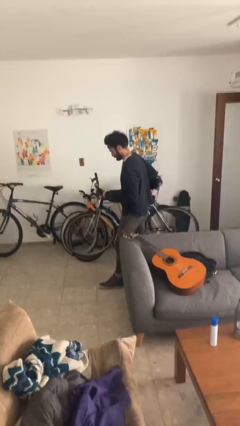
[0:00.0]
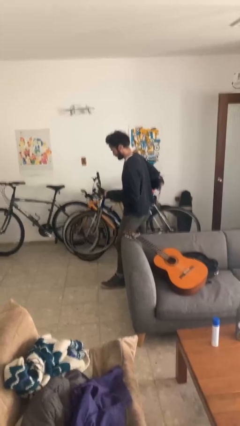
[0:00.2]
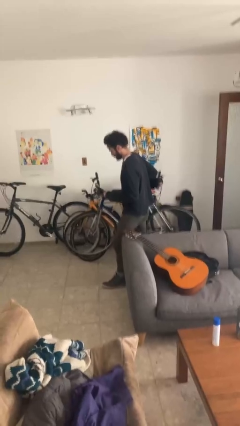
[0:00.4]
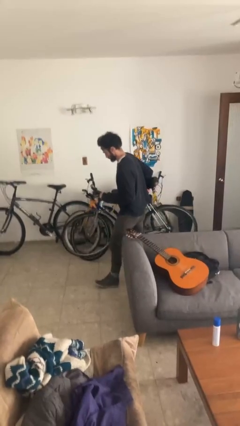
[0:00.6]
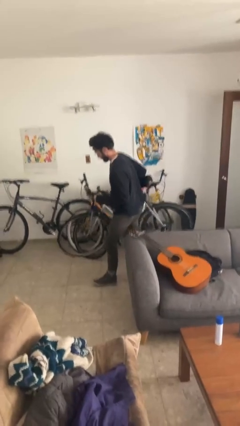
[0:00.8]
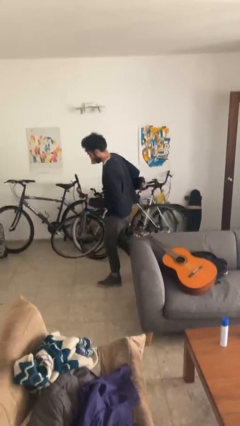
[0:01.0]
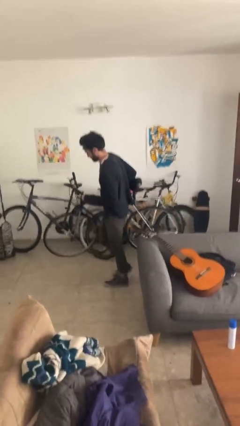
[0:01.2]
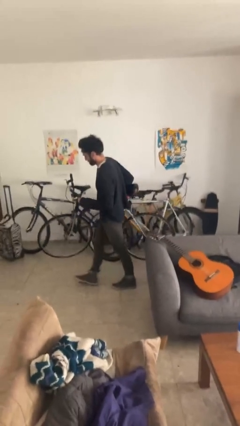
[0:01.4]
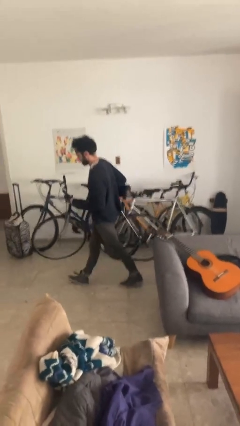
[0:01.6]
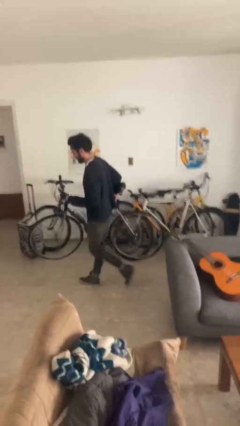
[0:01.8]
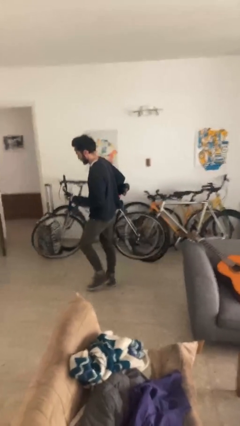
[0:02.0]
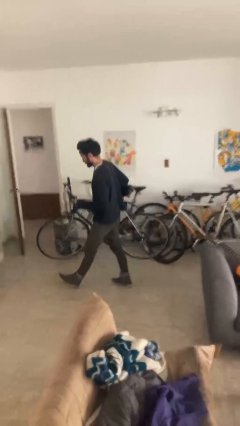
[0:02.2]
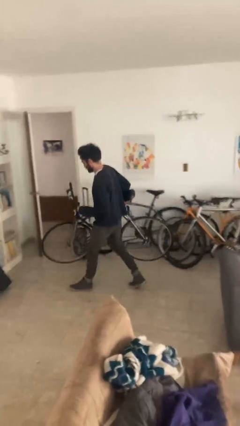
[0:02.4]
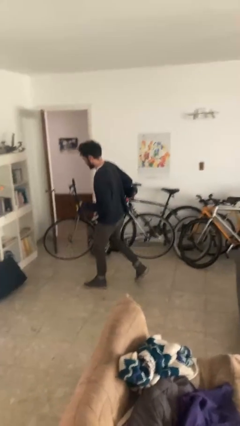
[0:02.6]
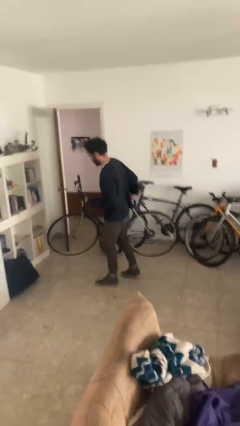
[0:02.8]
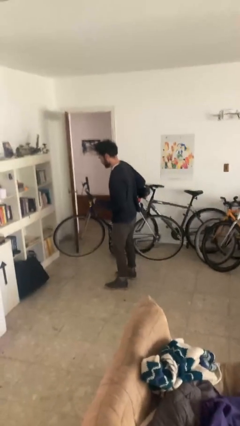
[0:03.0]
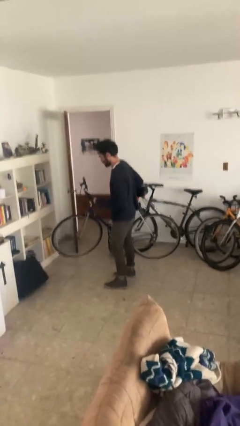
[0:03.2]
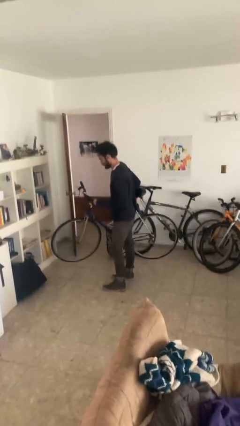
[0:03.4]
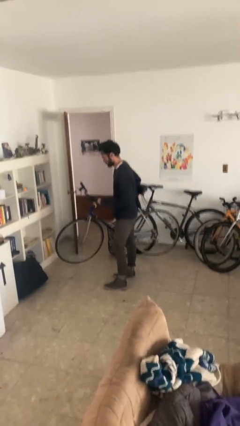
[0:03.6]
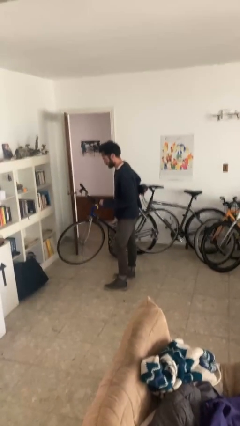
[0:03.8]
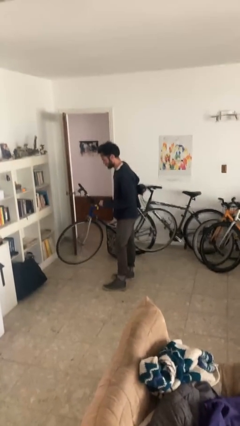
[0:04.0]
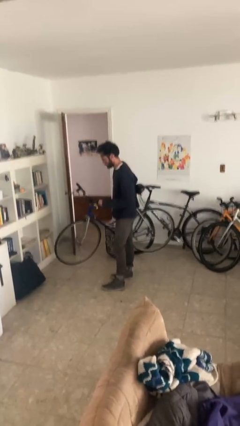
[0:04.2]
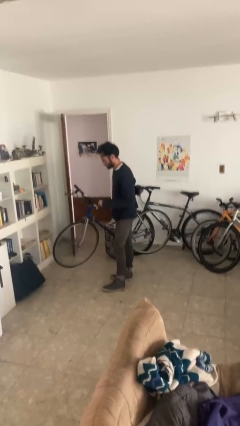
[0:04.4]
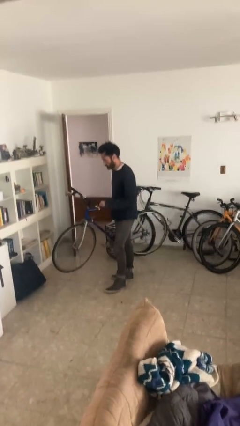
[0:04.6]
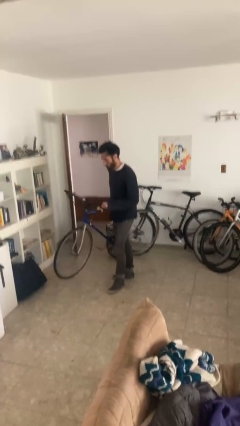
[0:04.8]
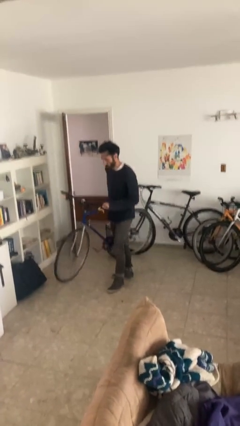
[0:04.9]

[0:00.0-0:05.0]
person carries bicycle

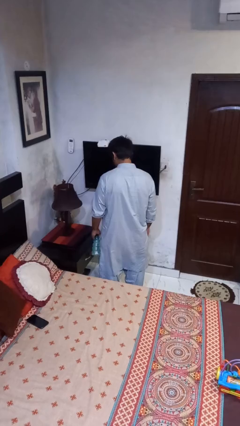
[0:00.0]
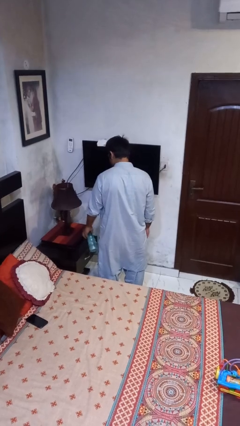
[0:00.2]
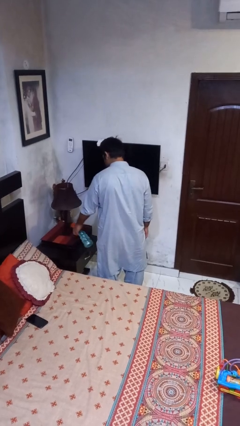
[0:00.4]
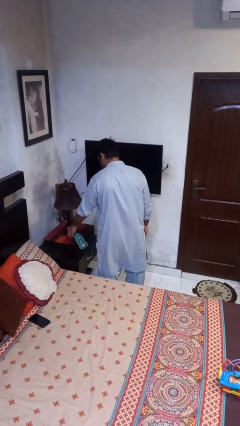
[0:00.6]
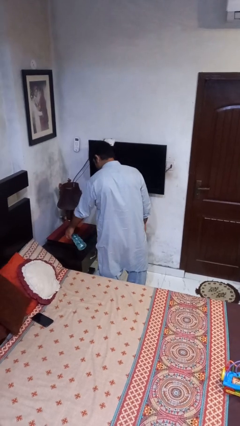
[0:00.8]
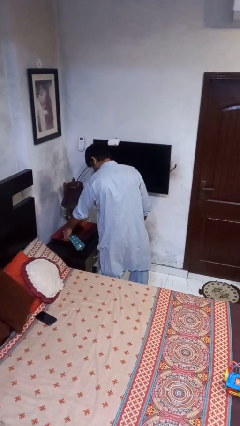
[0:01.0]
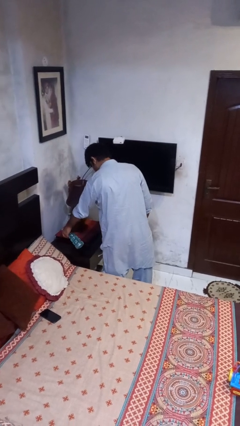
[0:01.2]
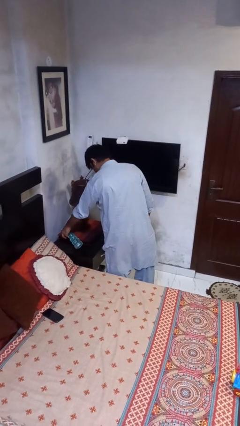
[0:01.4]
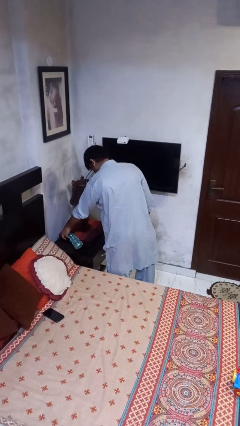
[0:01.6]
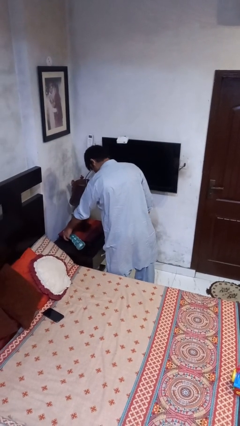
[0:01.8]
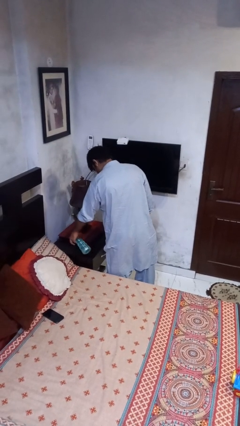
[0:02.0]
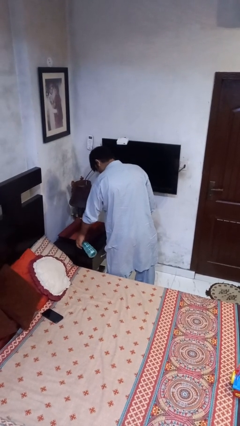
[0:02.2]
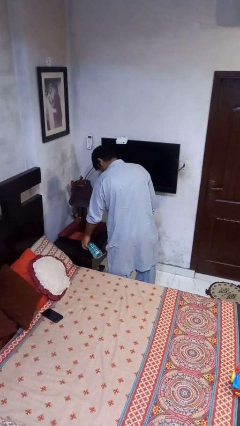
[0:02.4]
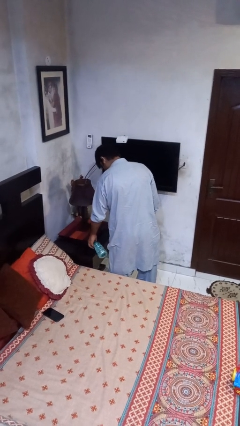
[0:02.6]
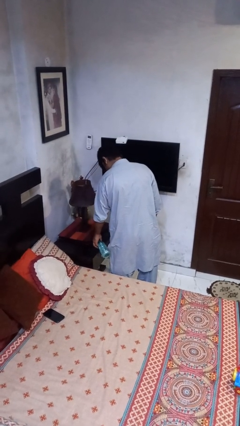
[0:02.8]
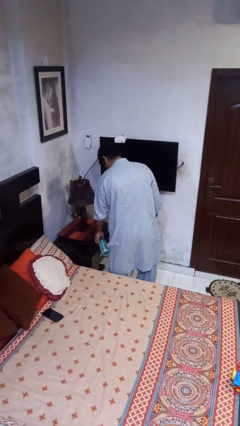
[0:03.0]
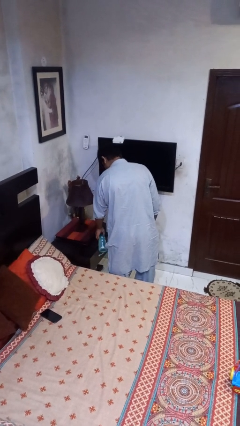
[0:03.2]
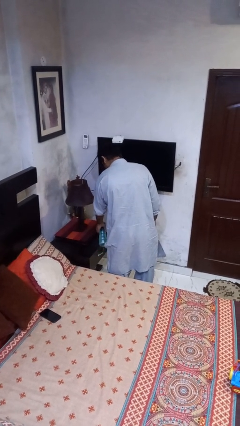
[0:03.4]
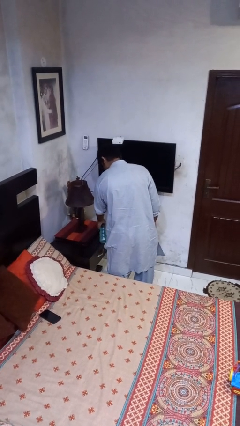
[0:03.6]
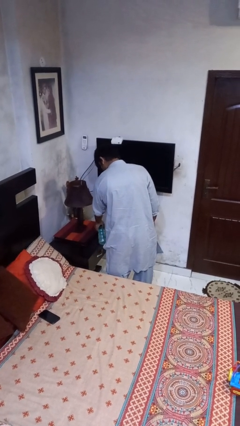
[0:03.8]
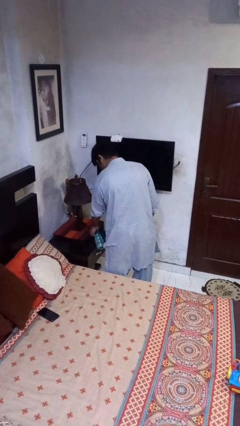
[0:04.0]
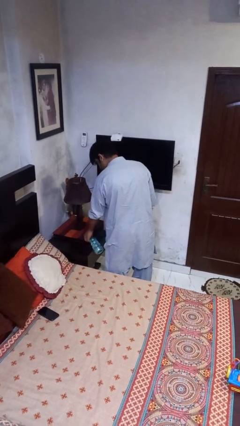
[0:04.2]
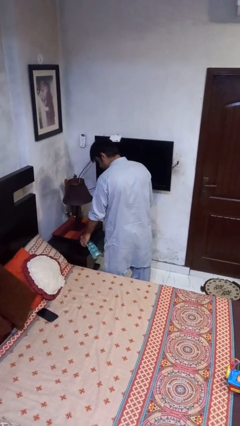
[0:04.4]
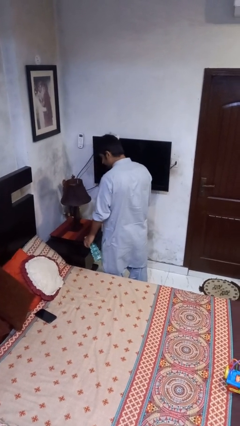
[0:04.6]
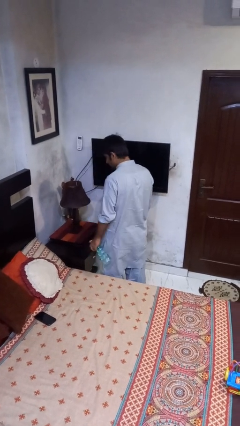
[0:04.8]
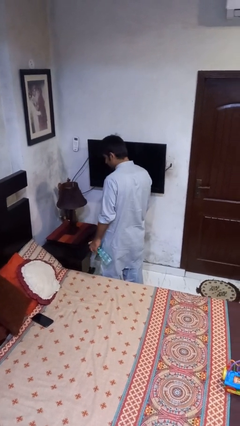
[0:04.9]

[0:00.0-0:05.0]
person sprays from bottle

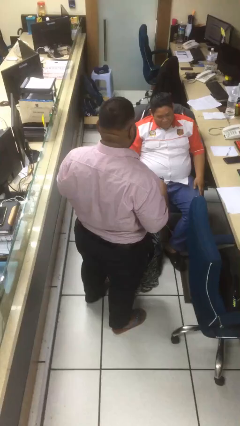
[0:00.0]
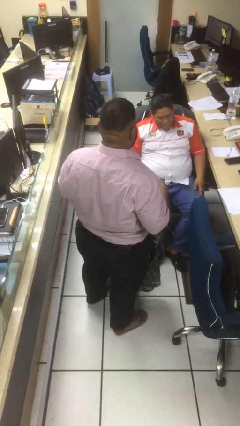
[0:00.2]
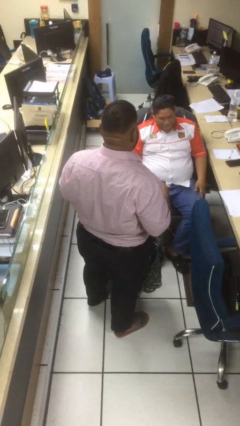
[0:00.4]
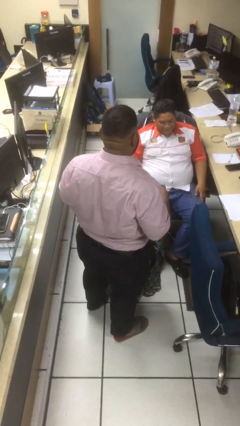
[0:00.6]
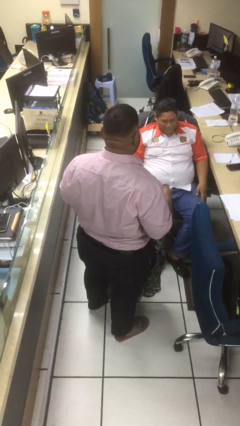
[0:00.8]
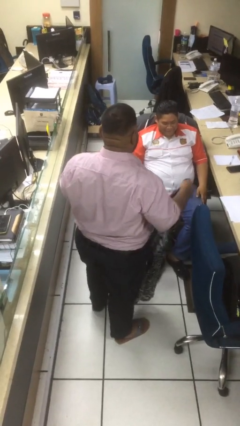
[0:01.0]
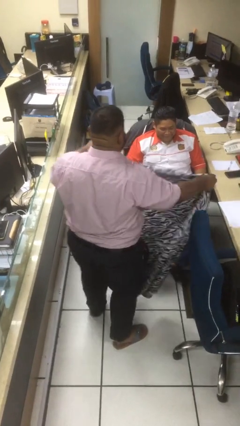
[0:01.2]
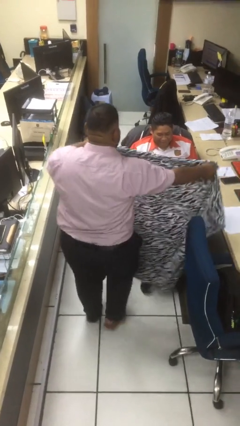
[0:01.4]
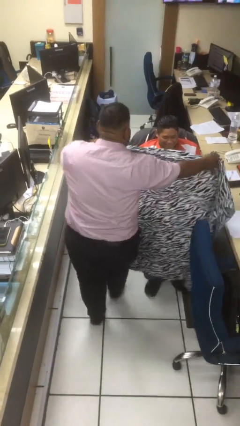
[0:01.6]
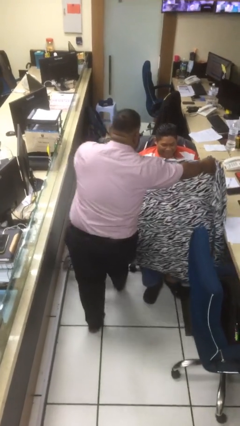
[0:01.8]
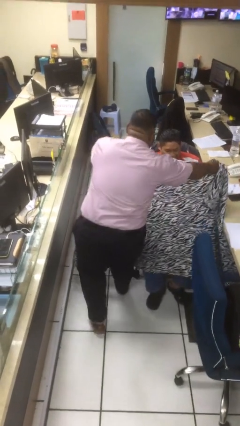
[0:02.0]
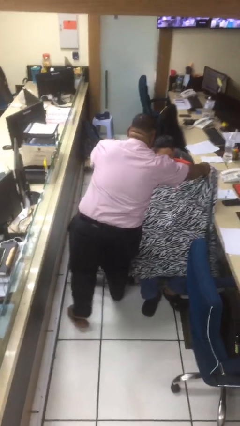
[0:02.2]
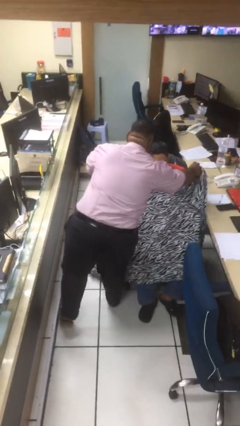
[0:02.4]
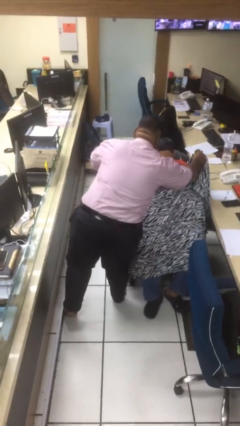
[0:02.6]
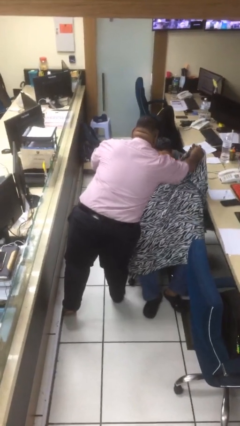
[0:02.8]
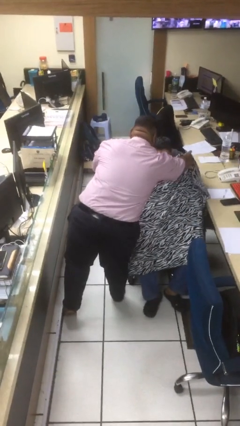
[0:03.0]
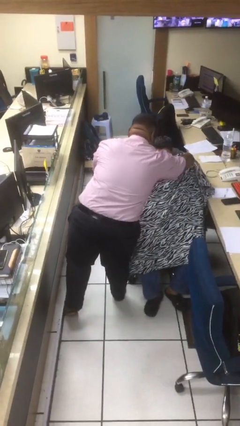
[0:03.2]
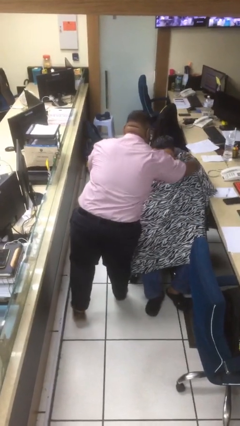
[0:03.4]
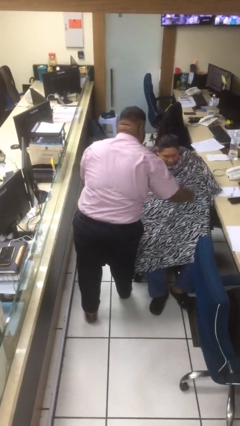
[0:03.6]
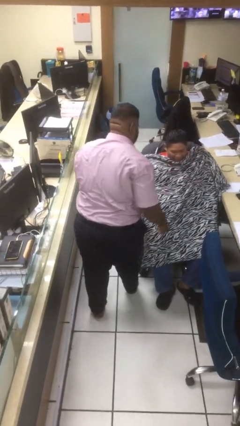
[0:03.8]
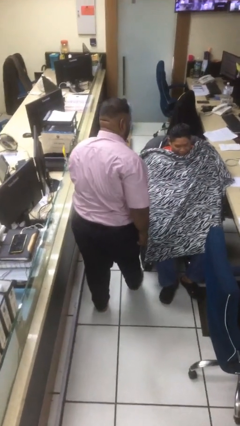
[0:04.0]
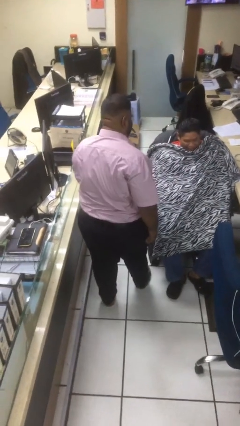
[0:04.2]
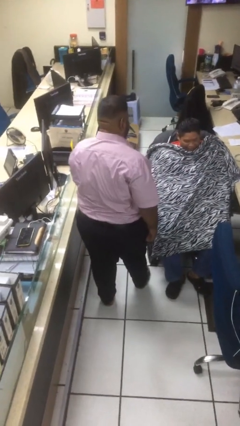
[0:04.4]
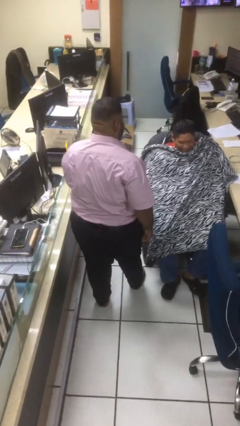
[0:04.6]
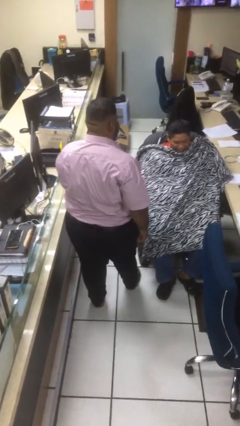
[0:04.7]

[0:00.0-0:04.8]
person covers friend with blanket

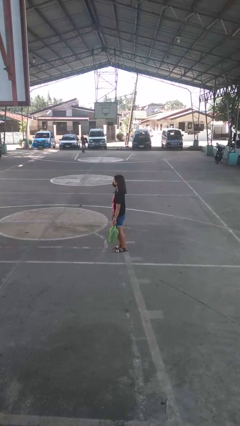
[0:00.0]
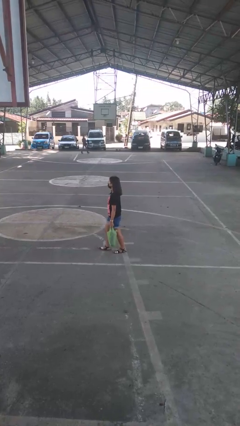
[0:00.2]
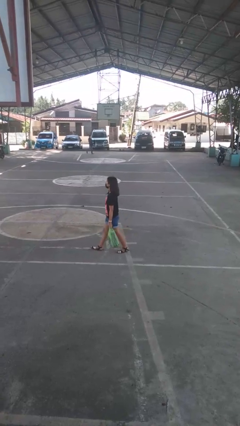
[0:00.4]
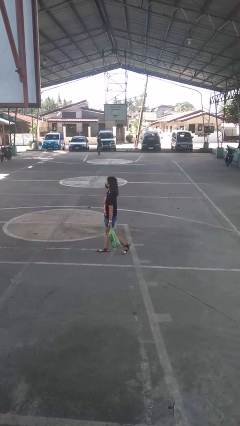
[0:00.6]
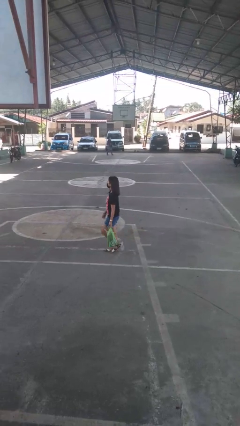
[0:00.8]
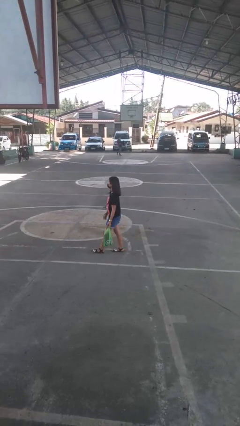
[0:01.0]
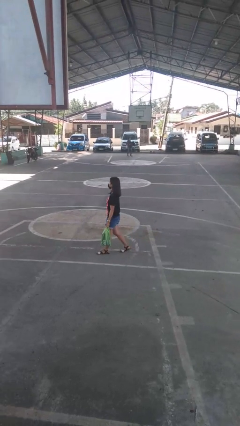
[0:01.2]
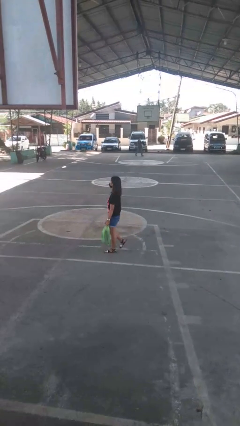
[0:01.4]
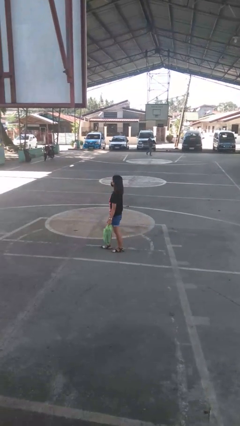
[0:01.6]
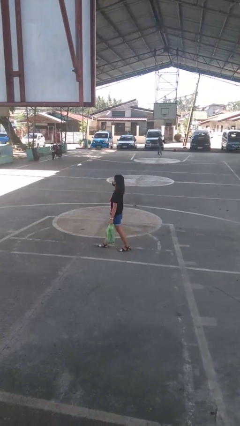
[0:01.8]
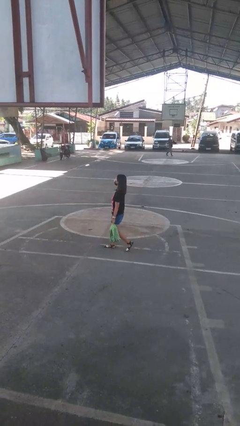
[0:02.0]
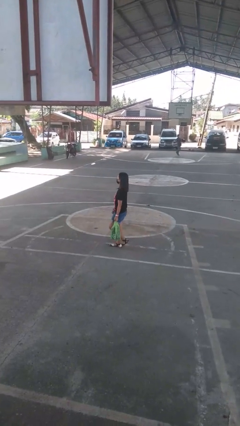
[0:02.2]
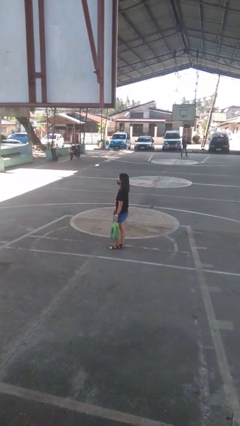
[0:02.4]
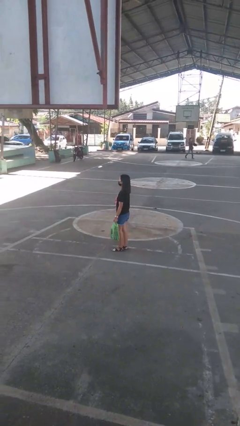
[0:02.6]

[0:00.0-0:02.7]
person carries groceries

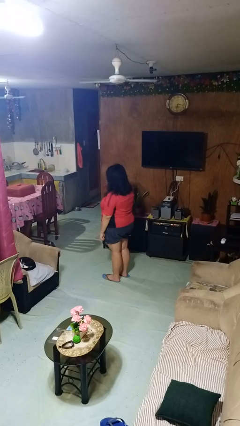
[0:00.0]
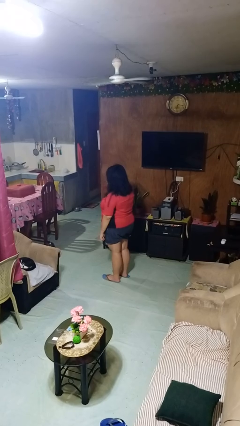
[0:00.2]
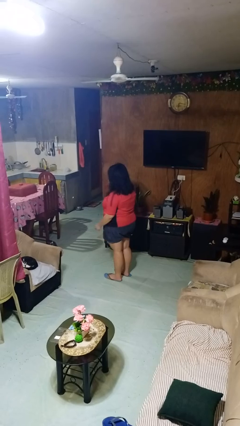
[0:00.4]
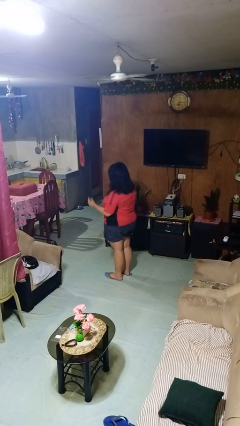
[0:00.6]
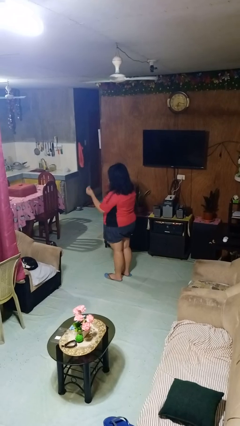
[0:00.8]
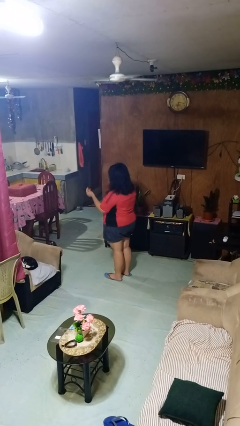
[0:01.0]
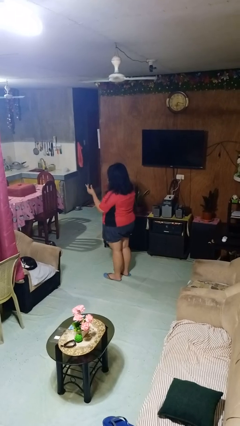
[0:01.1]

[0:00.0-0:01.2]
person snaps fingers
